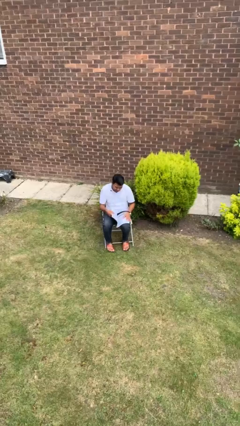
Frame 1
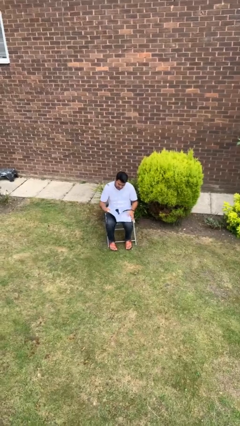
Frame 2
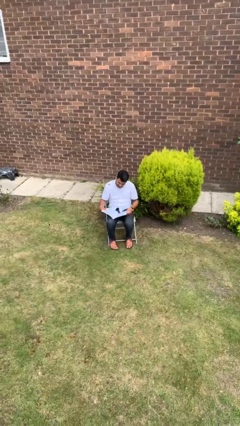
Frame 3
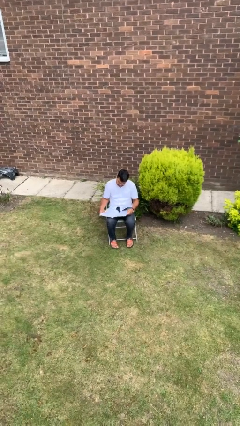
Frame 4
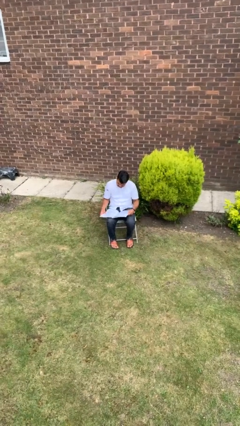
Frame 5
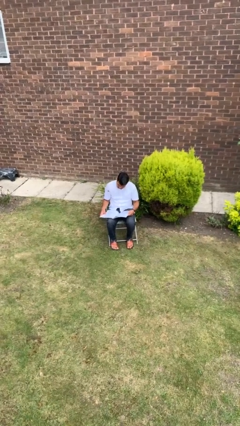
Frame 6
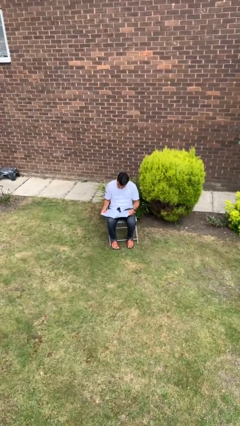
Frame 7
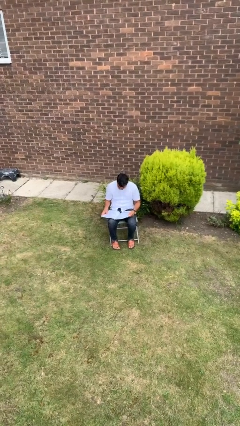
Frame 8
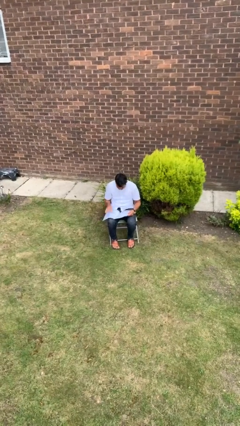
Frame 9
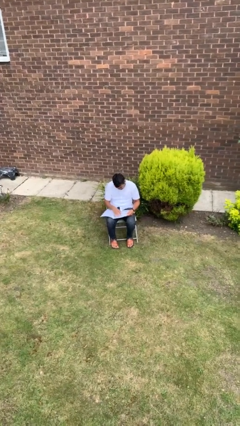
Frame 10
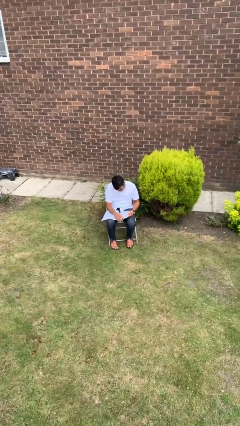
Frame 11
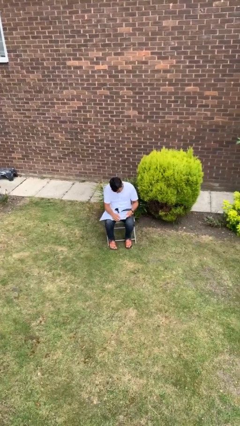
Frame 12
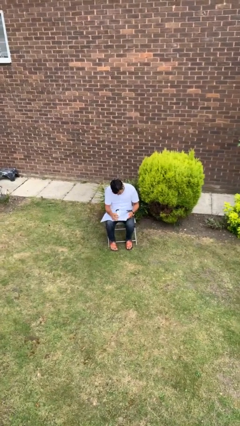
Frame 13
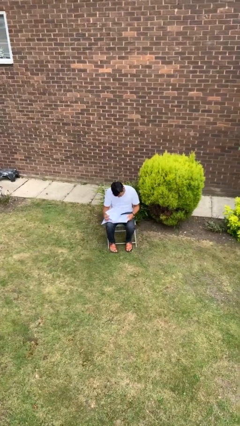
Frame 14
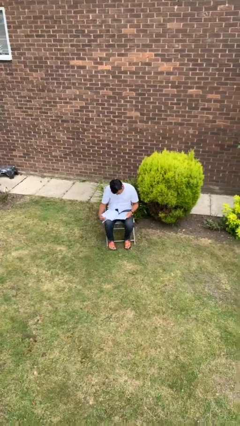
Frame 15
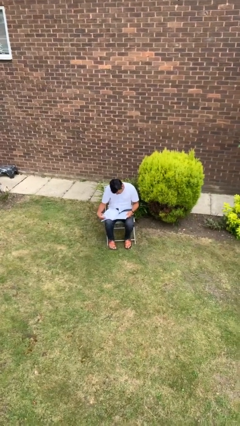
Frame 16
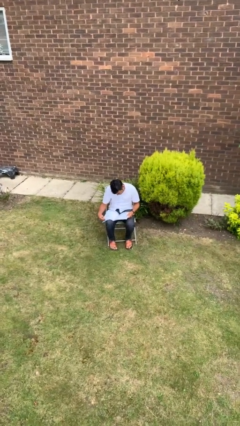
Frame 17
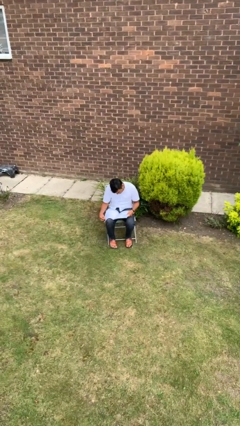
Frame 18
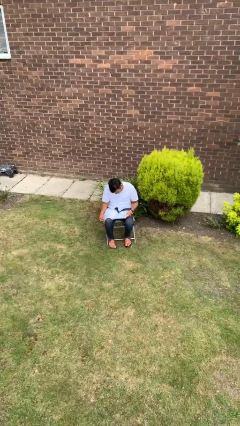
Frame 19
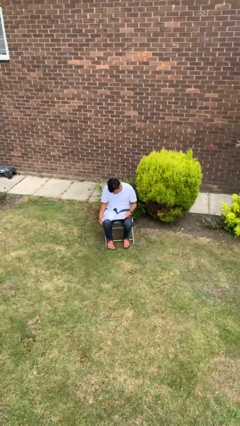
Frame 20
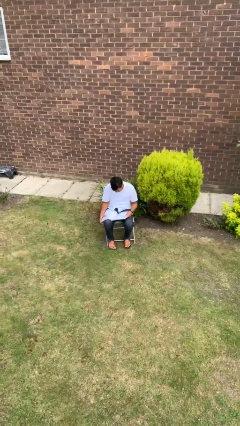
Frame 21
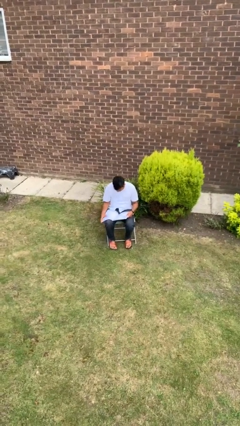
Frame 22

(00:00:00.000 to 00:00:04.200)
person reads book

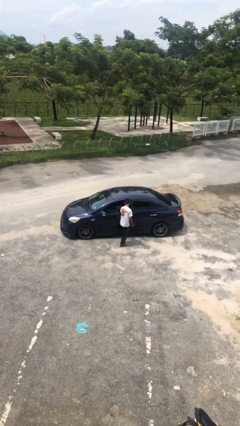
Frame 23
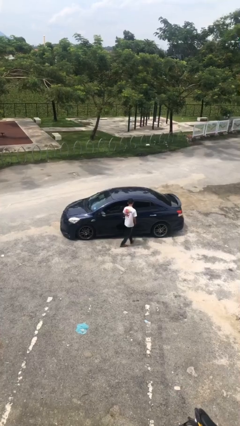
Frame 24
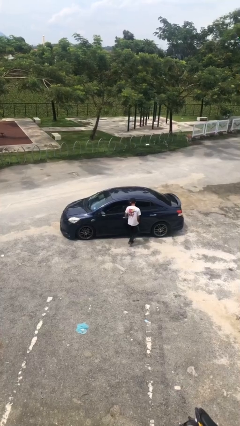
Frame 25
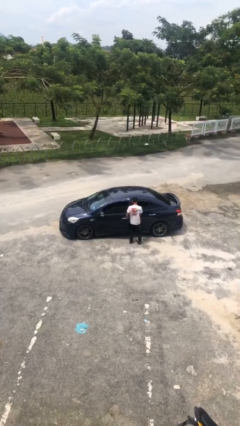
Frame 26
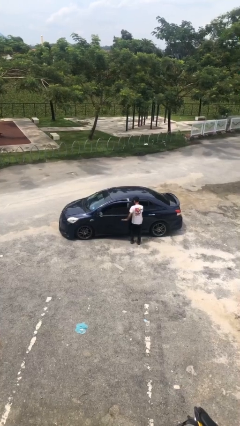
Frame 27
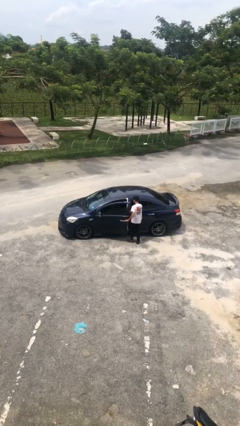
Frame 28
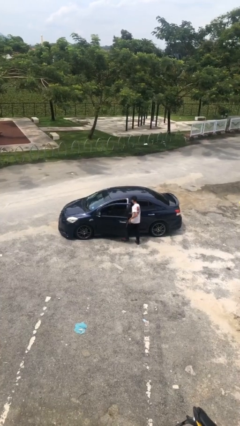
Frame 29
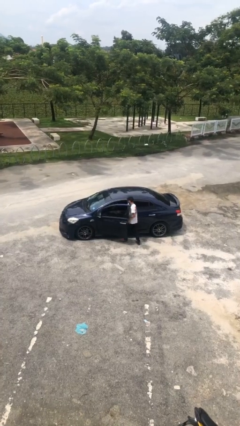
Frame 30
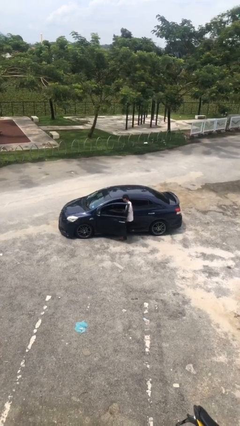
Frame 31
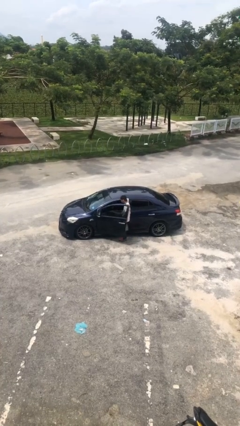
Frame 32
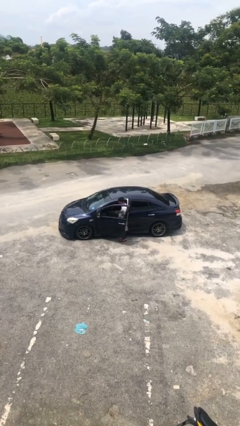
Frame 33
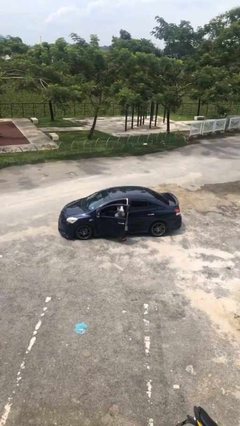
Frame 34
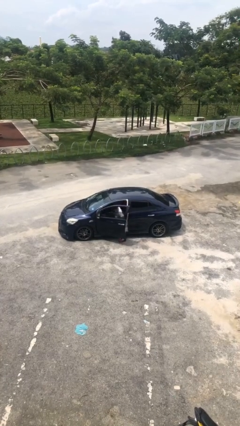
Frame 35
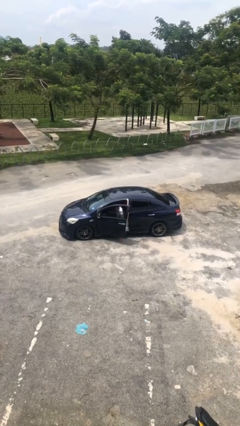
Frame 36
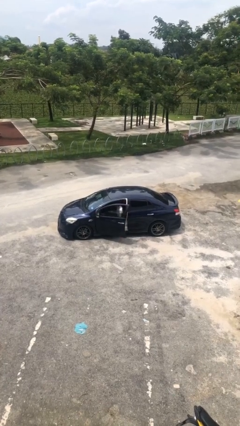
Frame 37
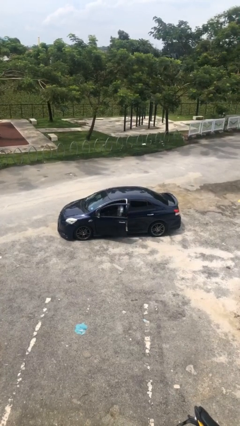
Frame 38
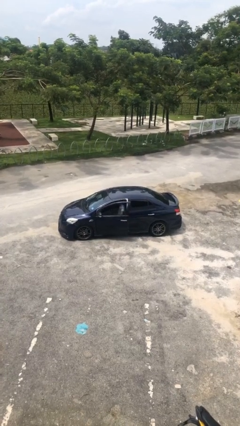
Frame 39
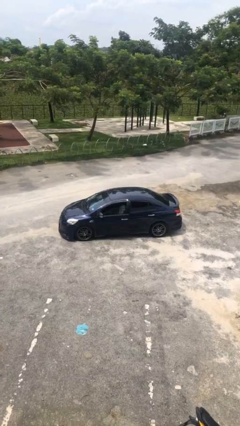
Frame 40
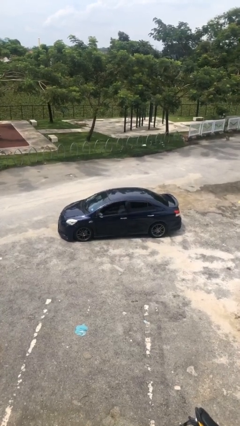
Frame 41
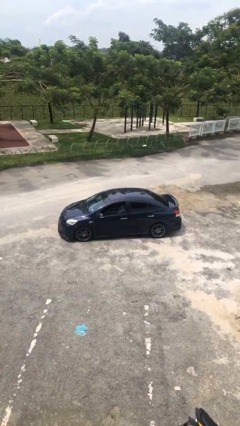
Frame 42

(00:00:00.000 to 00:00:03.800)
car picks up person

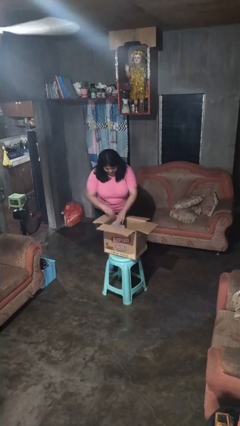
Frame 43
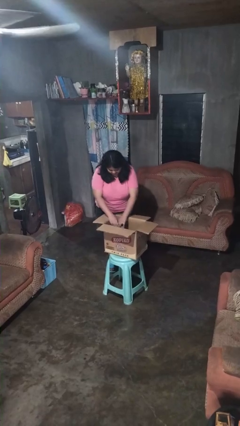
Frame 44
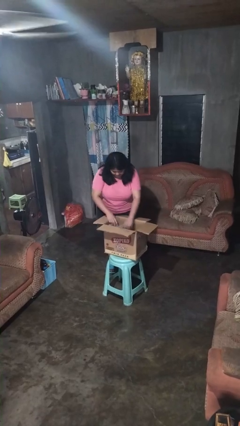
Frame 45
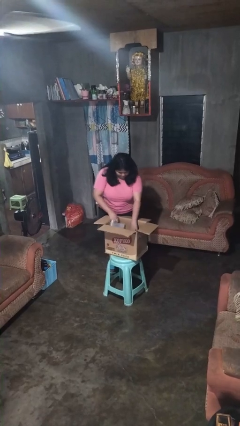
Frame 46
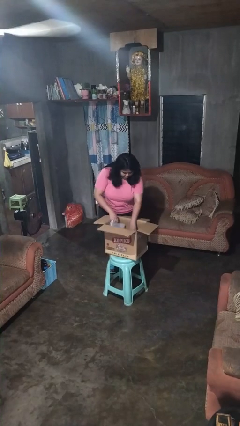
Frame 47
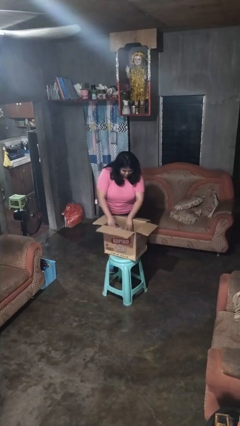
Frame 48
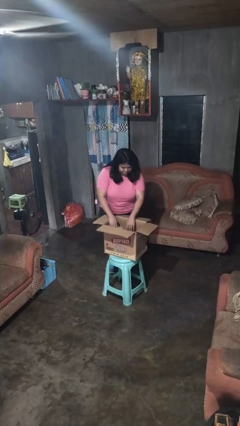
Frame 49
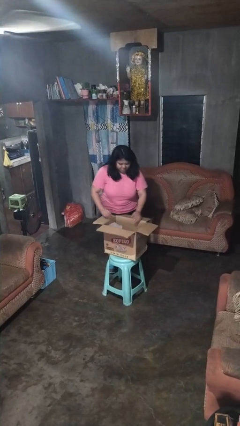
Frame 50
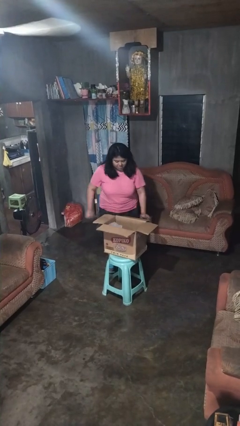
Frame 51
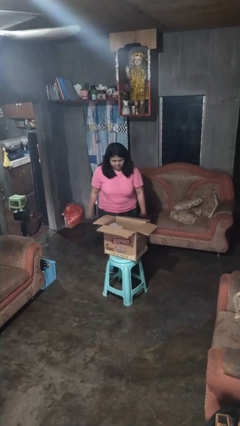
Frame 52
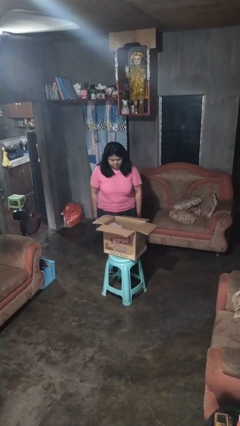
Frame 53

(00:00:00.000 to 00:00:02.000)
person searches in box

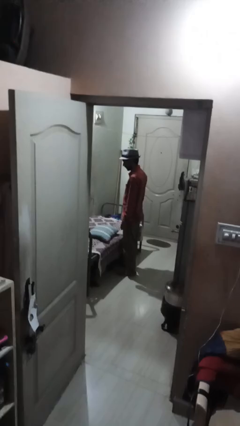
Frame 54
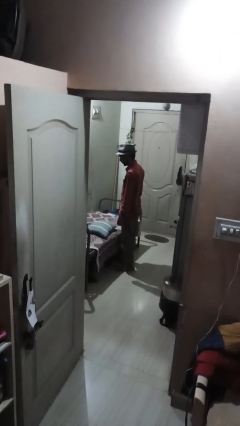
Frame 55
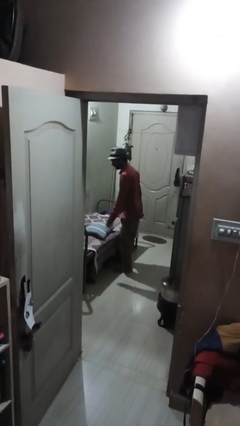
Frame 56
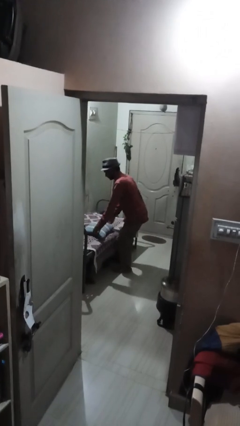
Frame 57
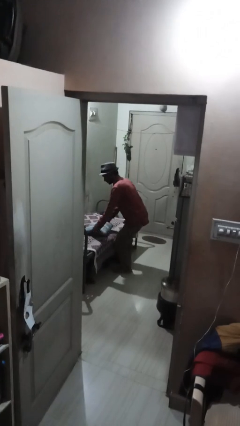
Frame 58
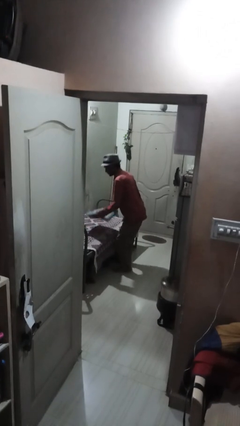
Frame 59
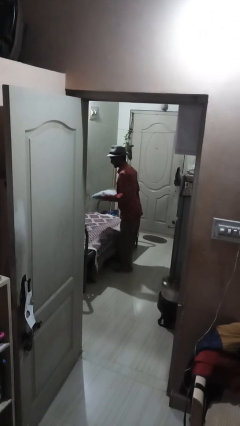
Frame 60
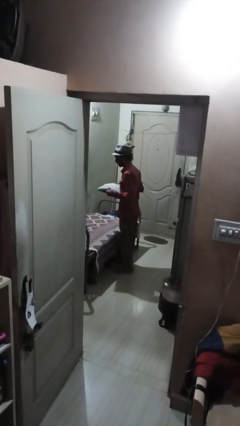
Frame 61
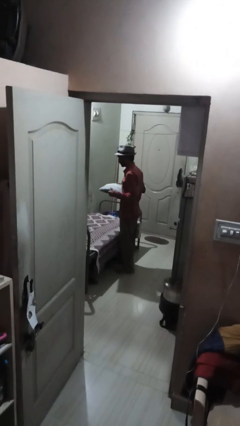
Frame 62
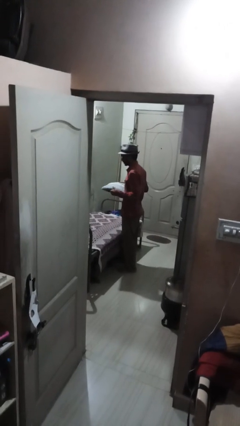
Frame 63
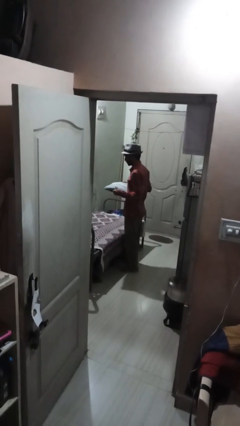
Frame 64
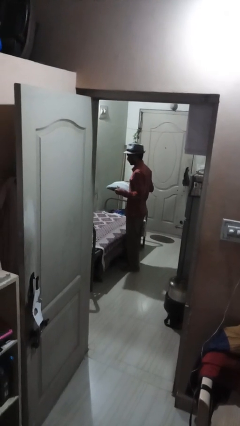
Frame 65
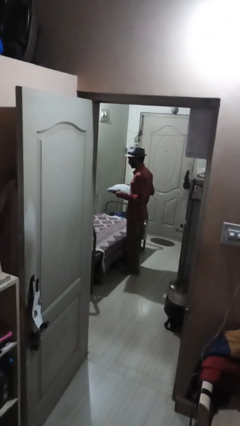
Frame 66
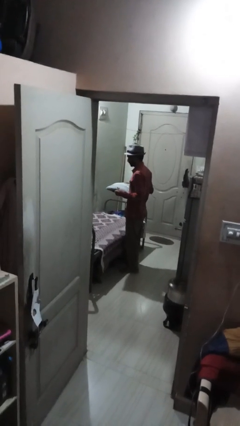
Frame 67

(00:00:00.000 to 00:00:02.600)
person picks up object from bed

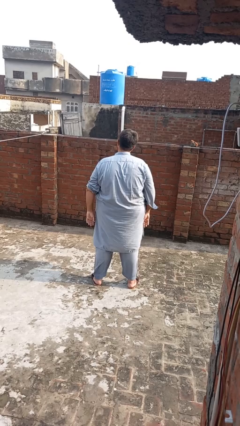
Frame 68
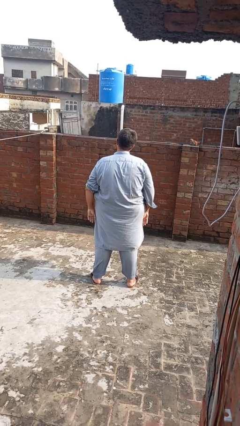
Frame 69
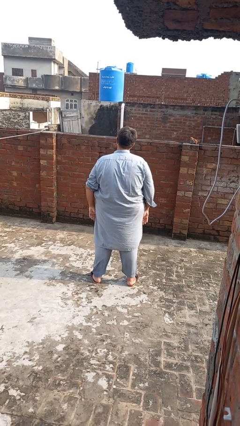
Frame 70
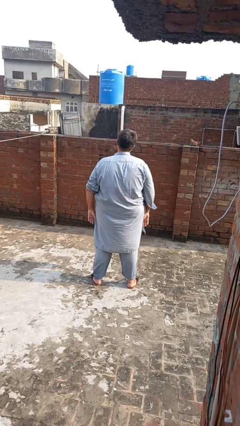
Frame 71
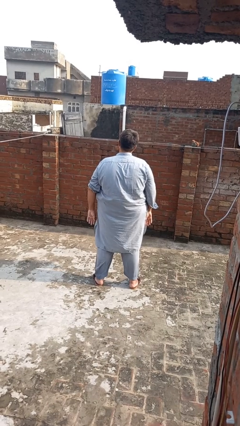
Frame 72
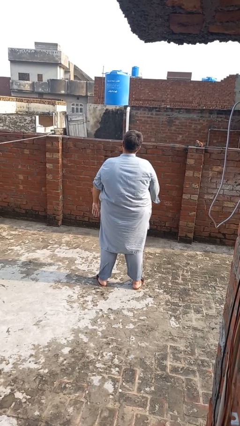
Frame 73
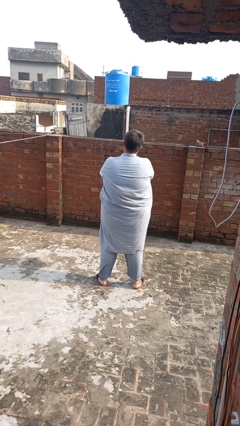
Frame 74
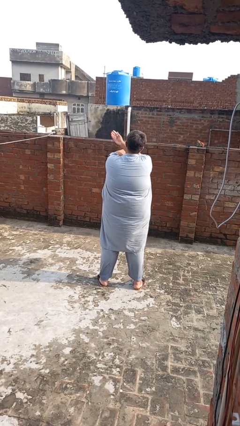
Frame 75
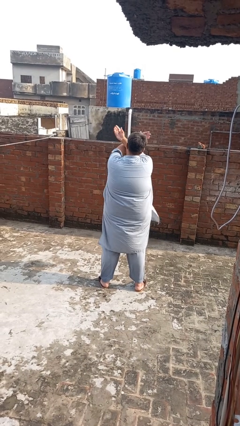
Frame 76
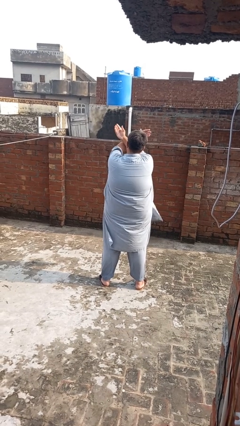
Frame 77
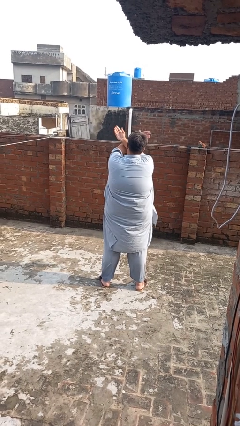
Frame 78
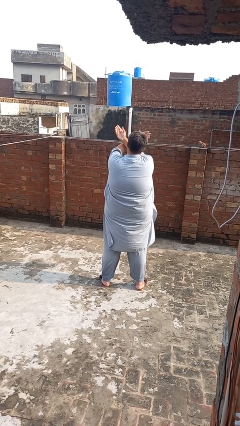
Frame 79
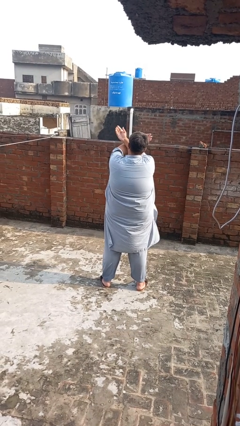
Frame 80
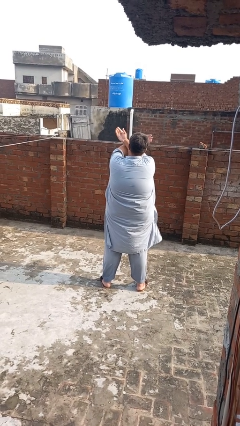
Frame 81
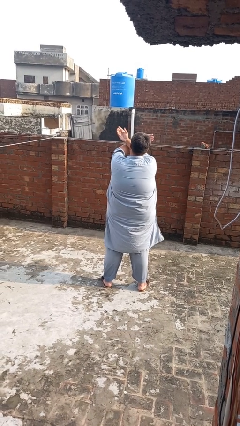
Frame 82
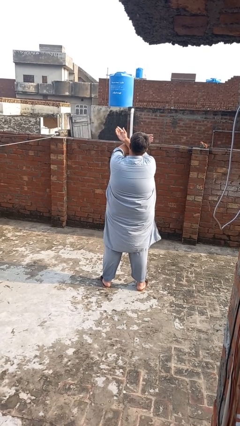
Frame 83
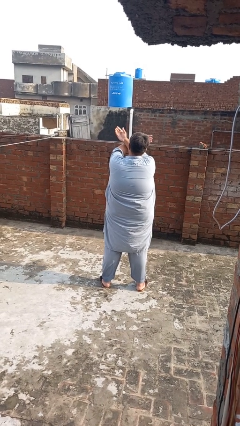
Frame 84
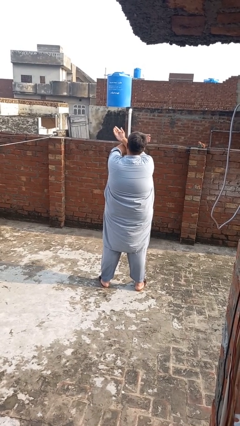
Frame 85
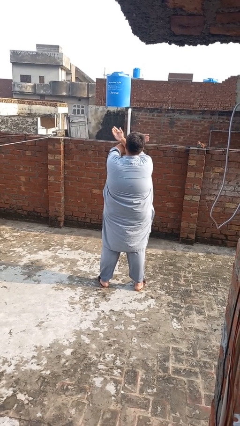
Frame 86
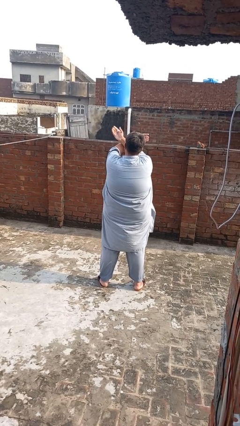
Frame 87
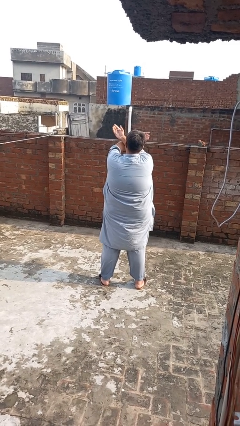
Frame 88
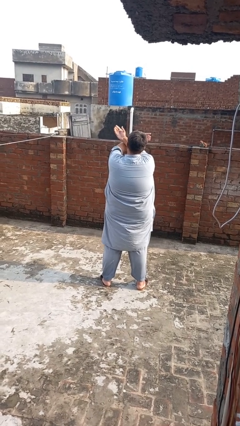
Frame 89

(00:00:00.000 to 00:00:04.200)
person gestures arms x

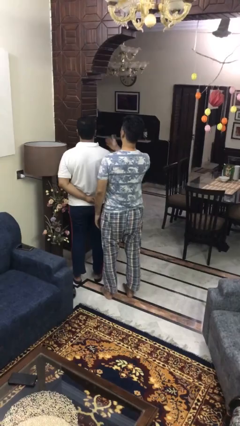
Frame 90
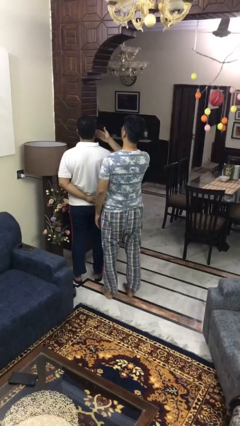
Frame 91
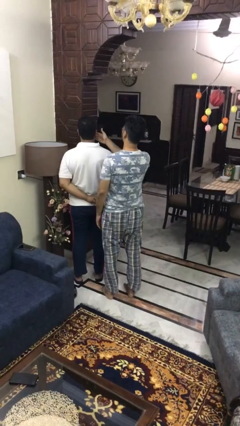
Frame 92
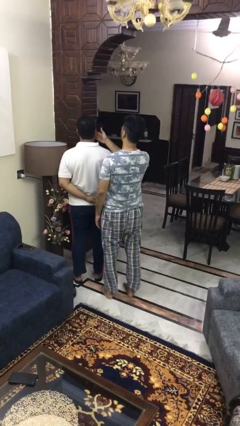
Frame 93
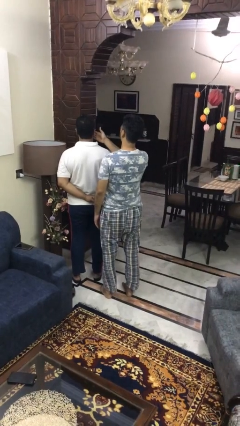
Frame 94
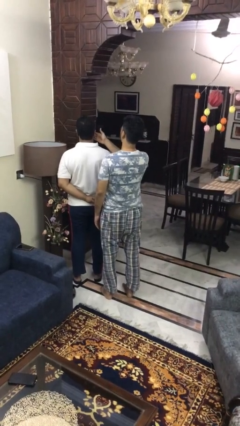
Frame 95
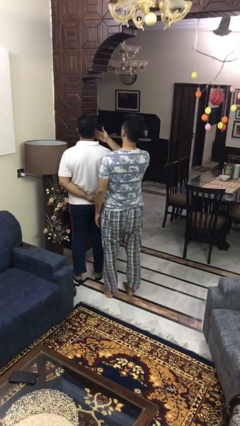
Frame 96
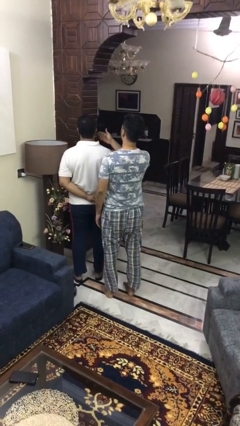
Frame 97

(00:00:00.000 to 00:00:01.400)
person touches face of person
